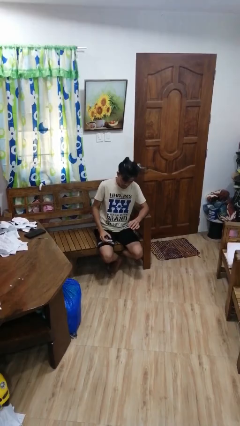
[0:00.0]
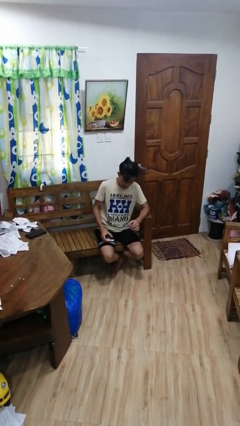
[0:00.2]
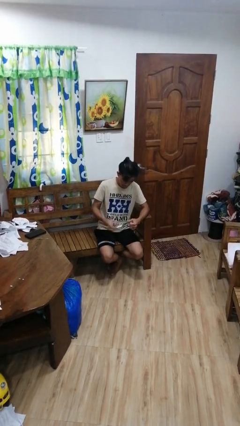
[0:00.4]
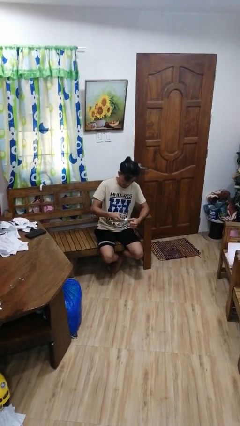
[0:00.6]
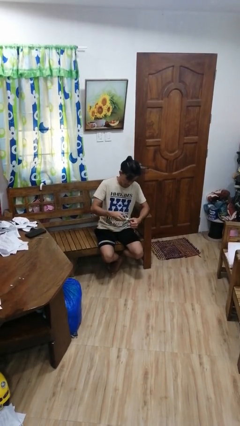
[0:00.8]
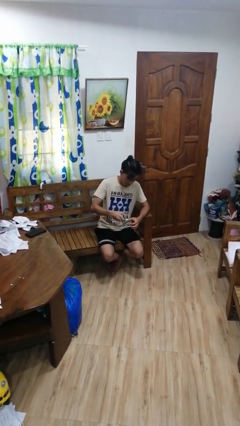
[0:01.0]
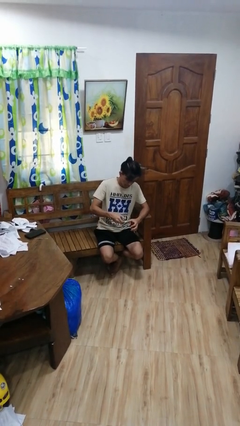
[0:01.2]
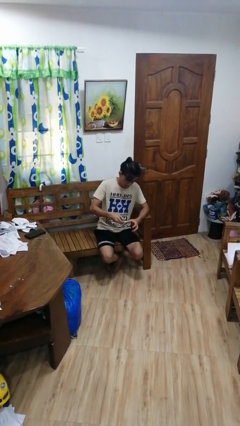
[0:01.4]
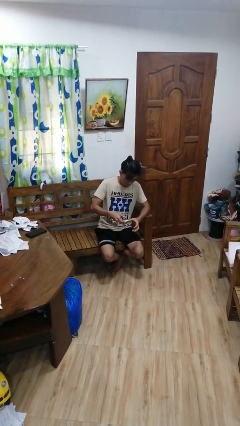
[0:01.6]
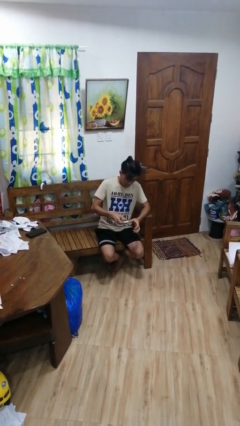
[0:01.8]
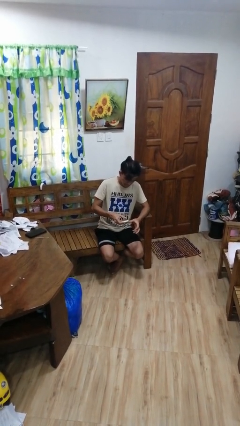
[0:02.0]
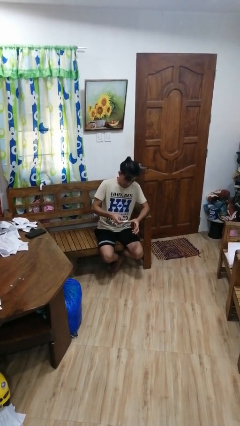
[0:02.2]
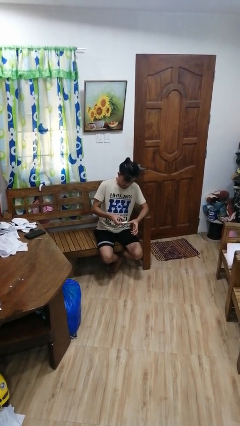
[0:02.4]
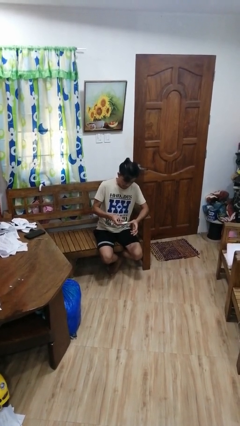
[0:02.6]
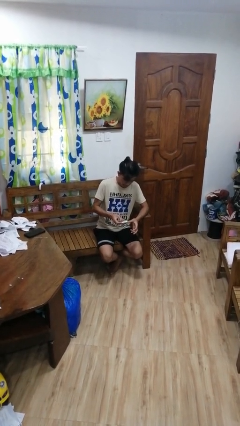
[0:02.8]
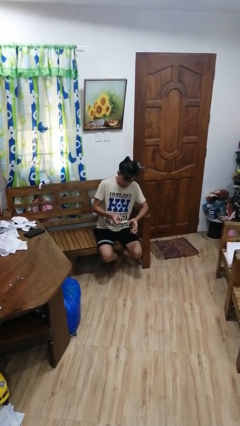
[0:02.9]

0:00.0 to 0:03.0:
person clips fingernails

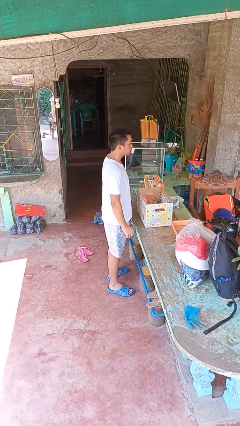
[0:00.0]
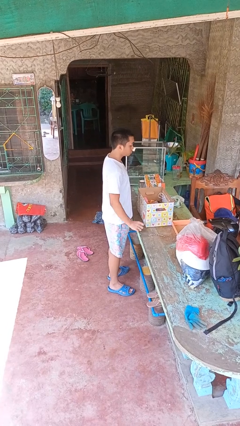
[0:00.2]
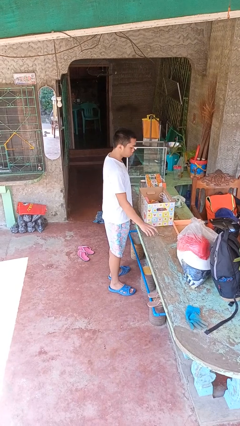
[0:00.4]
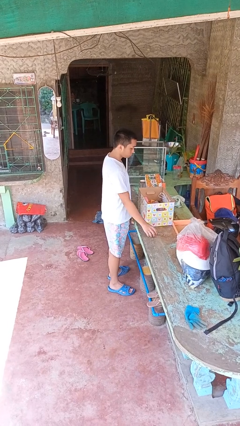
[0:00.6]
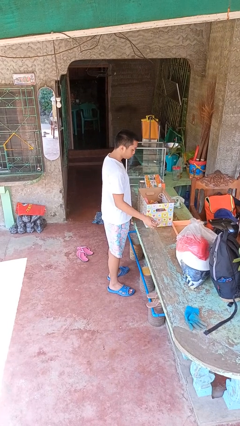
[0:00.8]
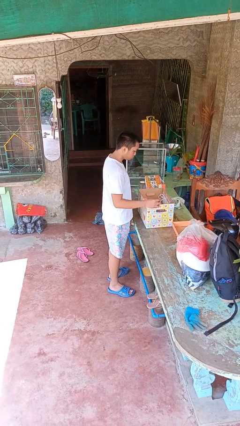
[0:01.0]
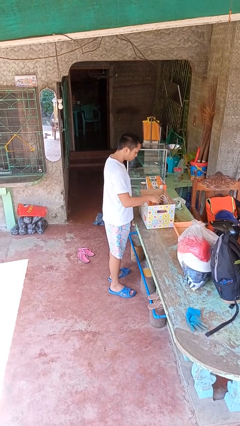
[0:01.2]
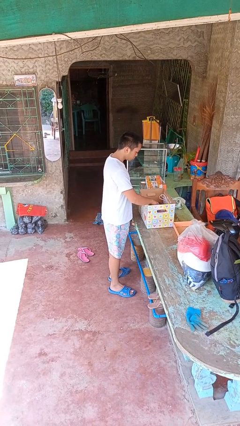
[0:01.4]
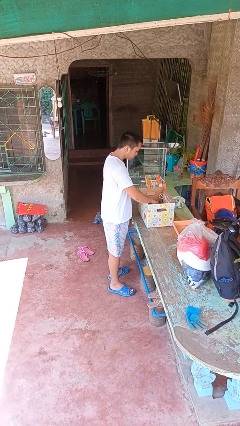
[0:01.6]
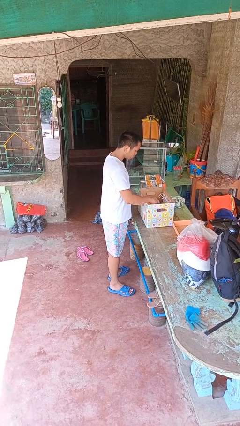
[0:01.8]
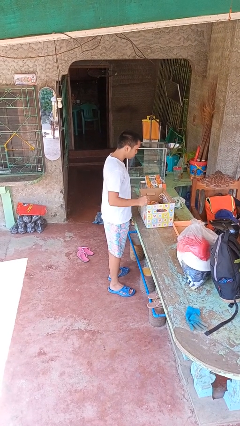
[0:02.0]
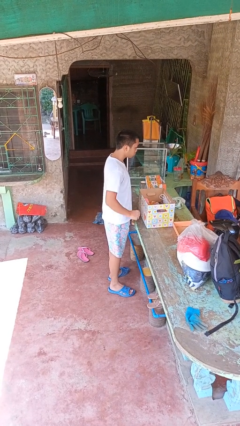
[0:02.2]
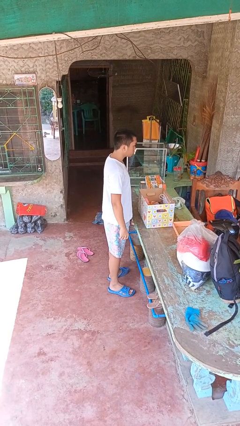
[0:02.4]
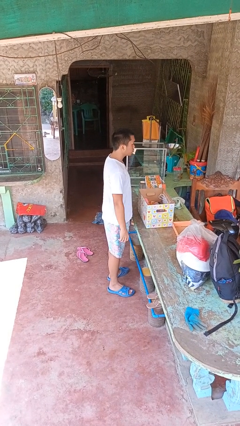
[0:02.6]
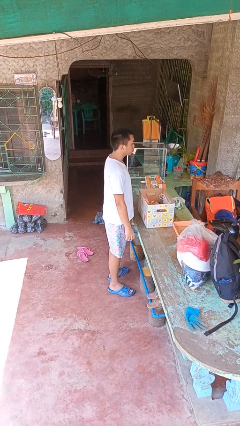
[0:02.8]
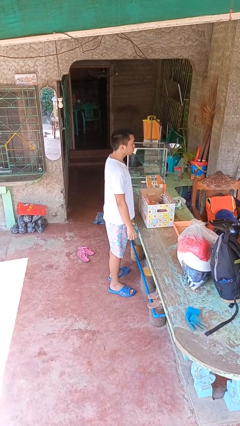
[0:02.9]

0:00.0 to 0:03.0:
person puts object into box

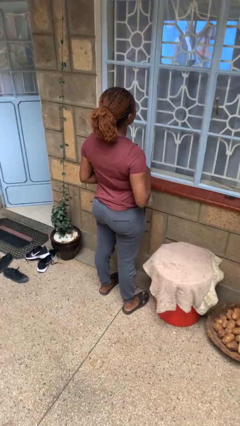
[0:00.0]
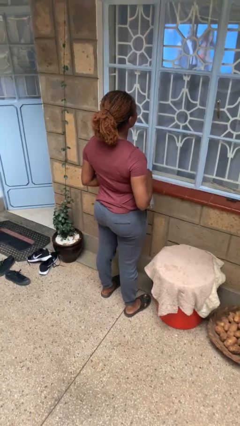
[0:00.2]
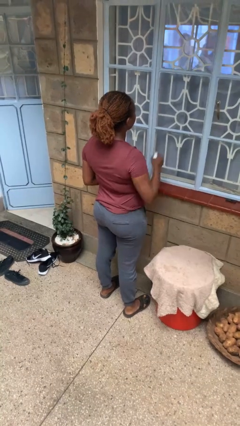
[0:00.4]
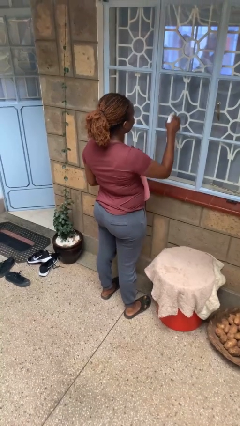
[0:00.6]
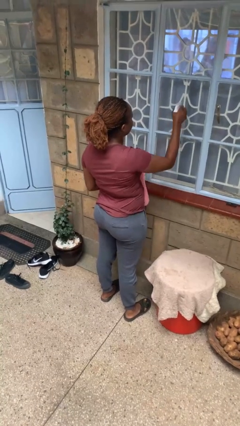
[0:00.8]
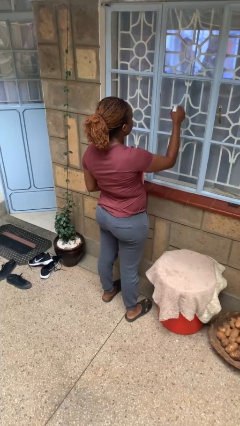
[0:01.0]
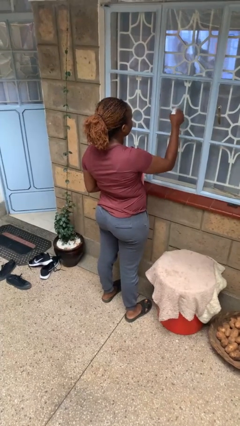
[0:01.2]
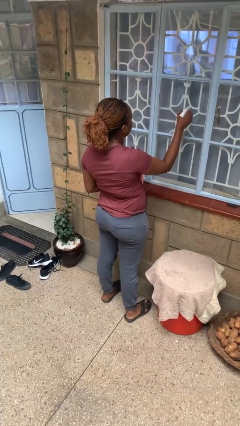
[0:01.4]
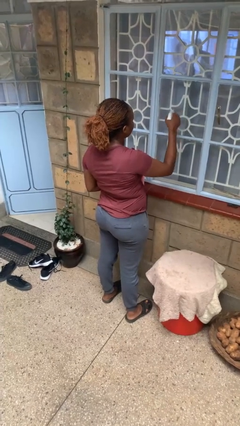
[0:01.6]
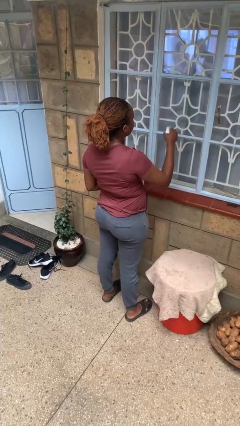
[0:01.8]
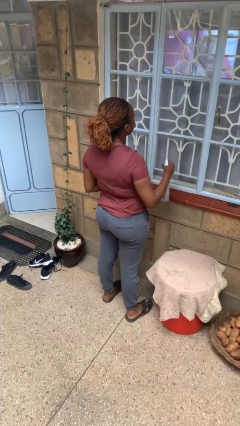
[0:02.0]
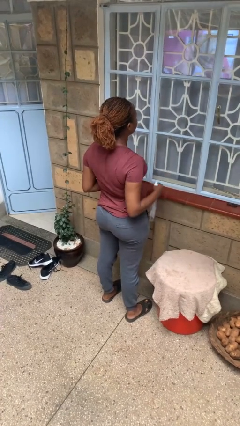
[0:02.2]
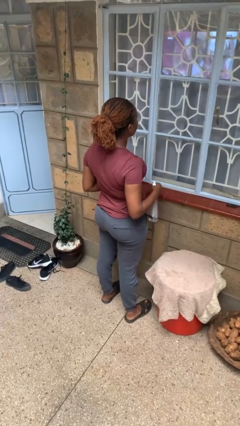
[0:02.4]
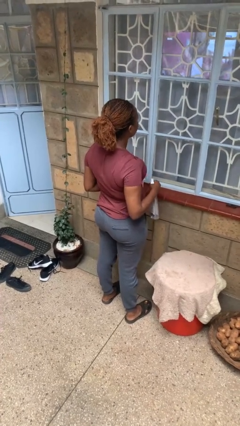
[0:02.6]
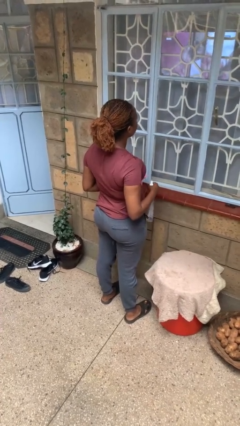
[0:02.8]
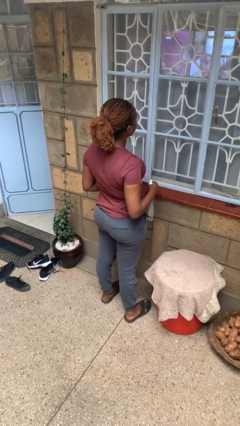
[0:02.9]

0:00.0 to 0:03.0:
person sprays from bottle

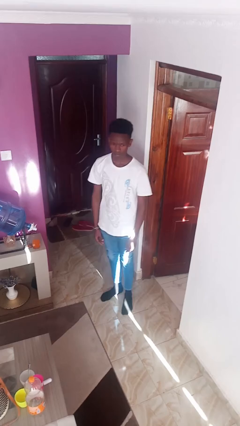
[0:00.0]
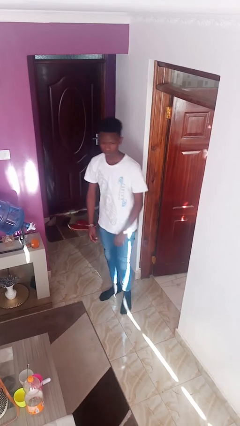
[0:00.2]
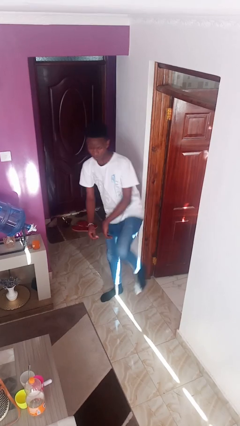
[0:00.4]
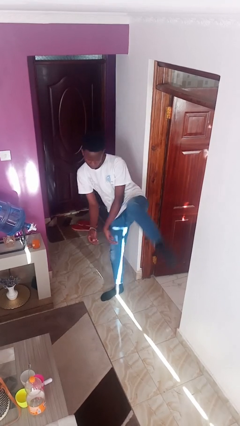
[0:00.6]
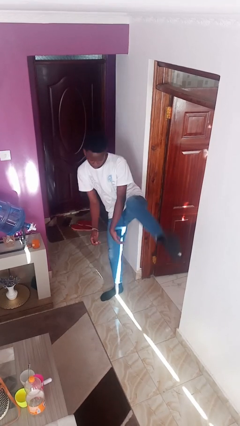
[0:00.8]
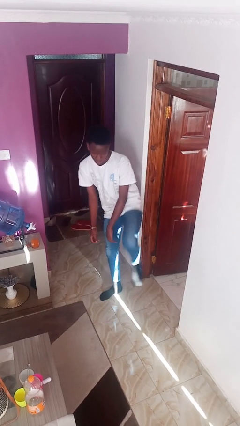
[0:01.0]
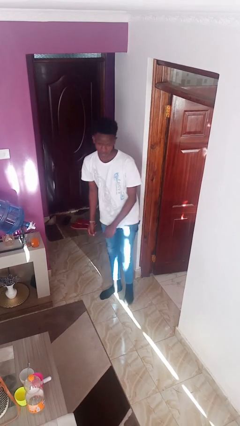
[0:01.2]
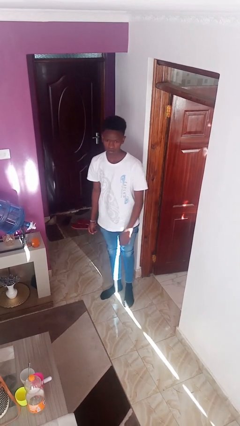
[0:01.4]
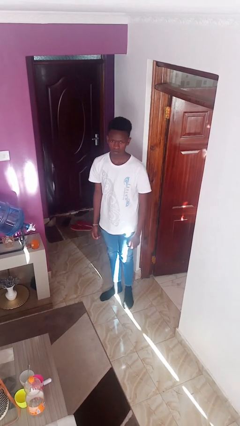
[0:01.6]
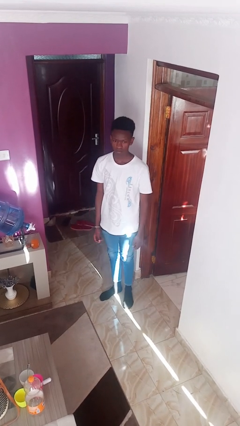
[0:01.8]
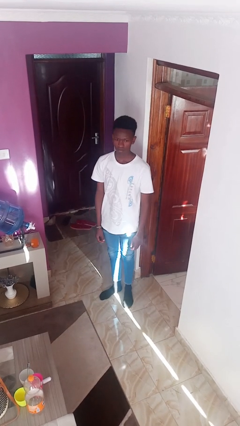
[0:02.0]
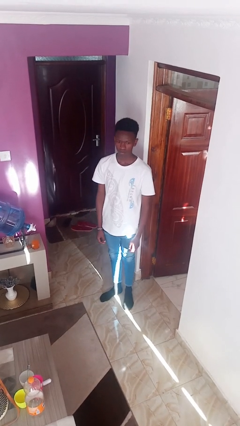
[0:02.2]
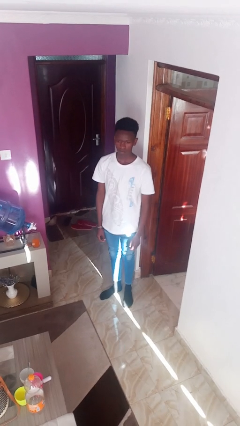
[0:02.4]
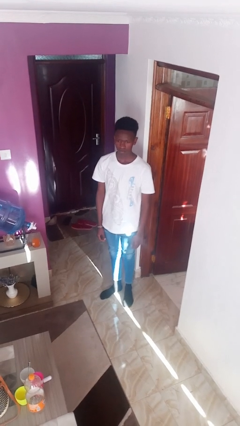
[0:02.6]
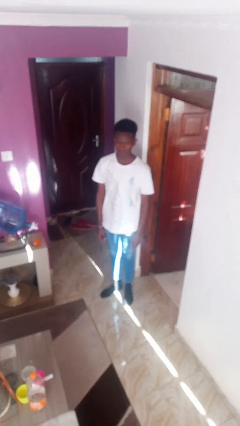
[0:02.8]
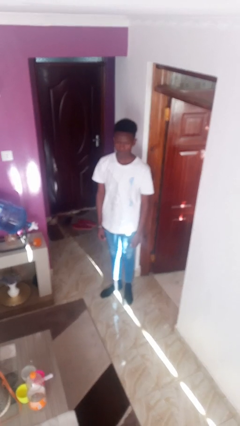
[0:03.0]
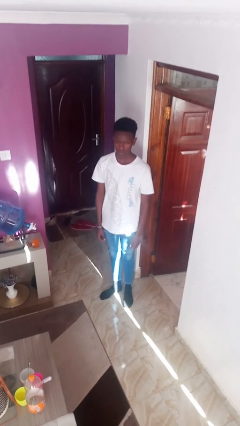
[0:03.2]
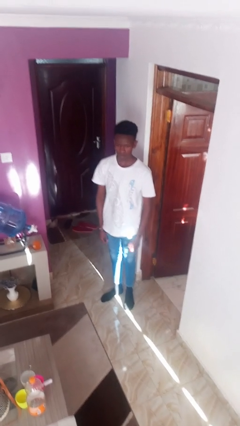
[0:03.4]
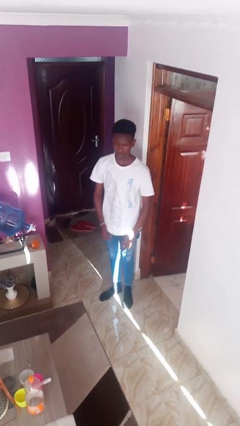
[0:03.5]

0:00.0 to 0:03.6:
person karate kicks

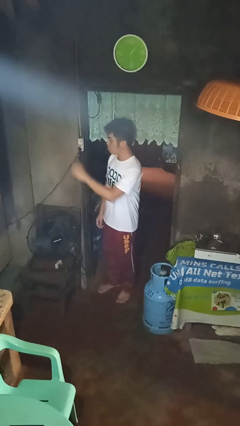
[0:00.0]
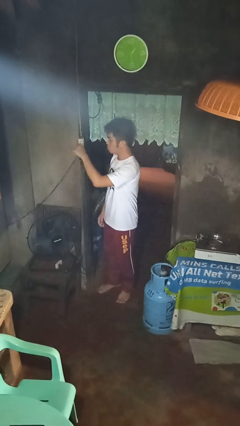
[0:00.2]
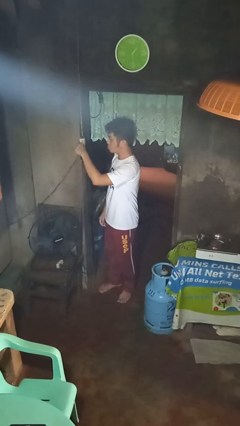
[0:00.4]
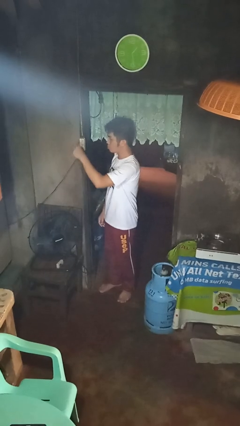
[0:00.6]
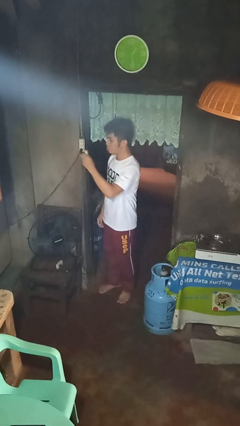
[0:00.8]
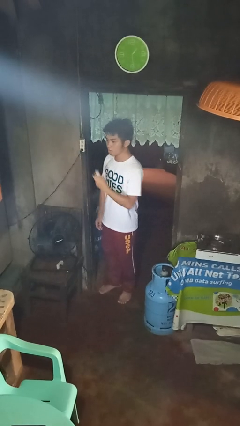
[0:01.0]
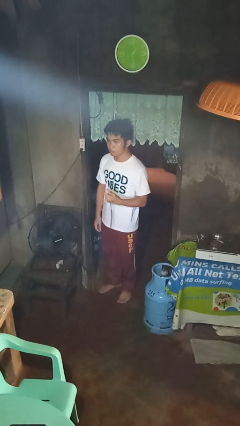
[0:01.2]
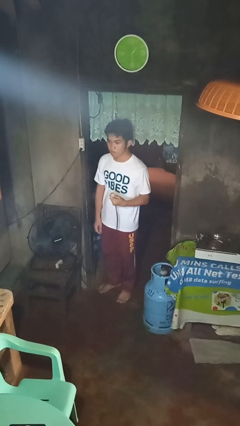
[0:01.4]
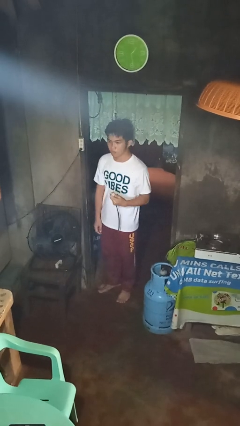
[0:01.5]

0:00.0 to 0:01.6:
person unplugs from electrical socket

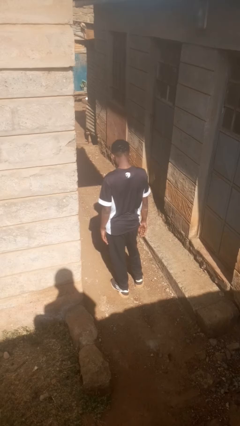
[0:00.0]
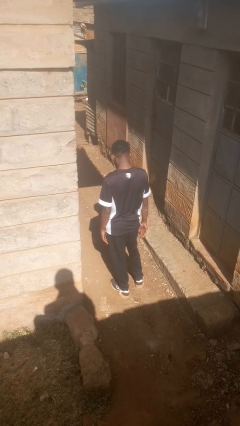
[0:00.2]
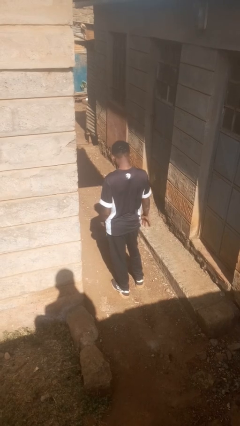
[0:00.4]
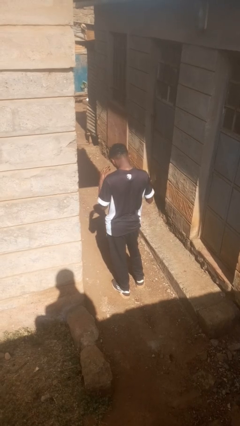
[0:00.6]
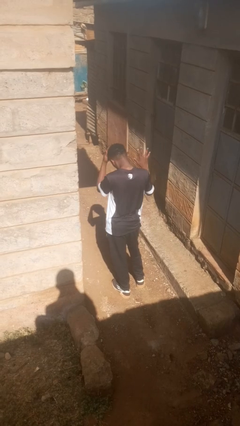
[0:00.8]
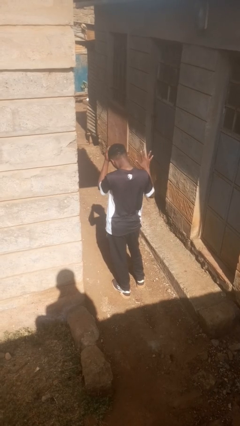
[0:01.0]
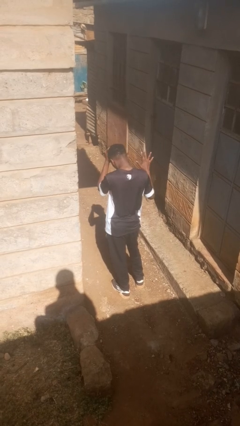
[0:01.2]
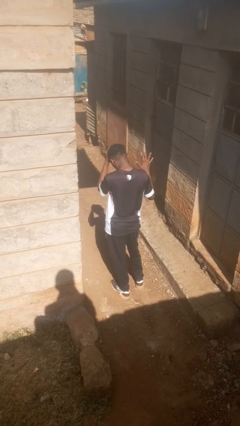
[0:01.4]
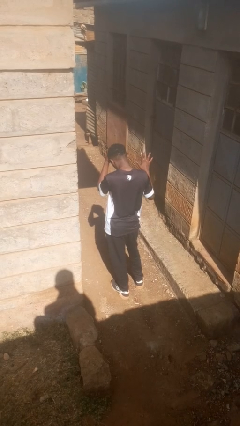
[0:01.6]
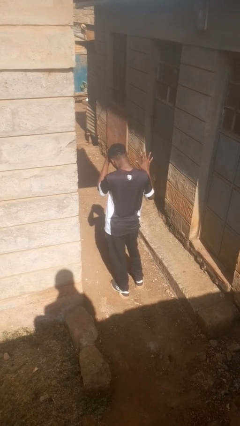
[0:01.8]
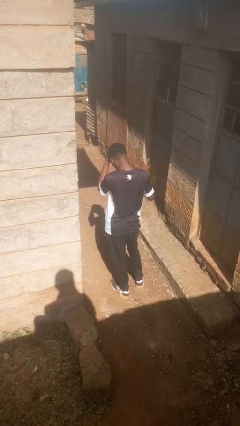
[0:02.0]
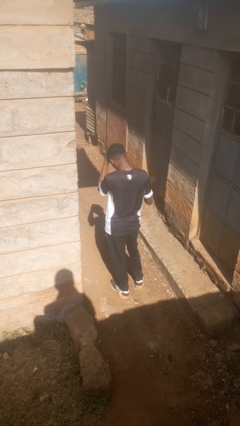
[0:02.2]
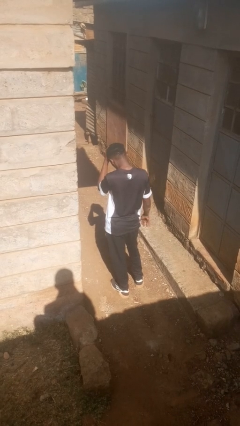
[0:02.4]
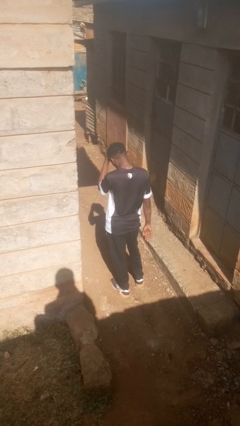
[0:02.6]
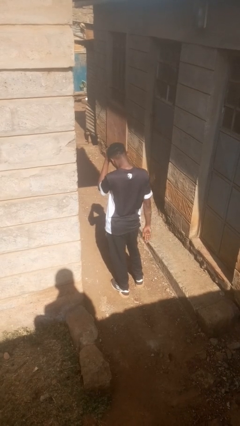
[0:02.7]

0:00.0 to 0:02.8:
person gestures number five

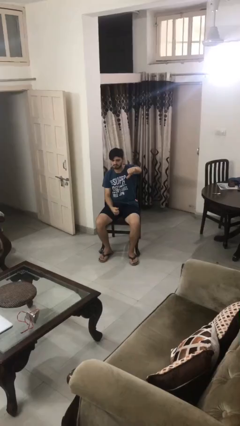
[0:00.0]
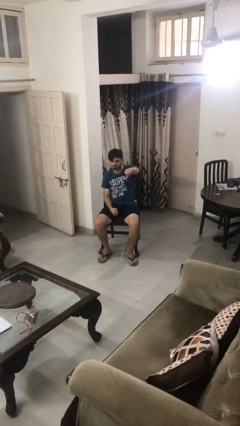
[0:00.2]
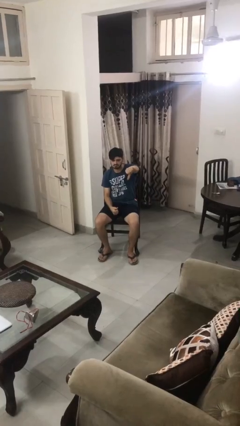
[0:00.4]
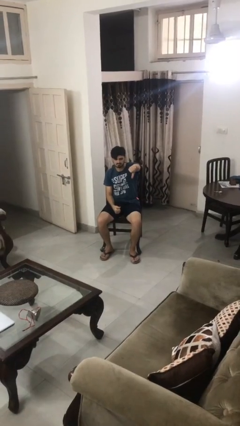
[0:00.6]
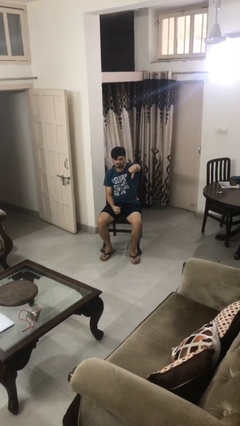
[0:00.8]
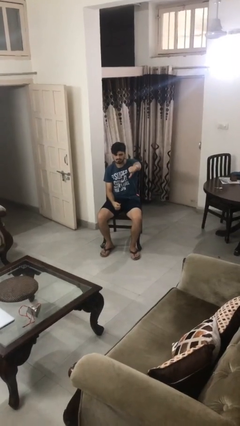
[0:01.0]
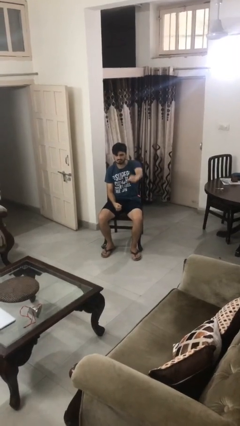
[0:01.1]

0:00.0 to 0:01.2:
person gestures thumbs down
